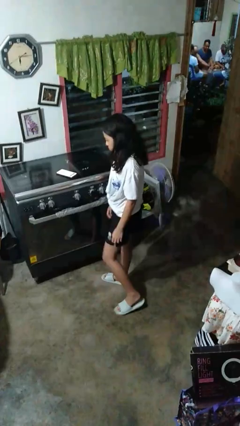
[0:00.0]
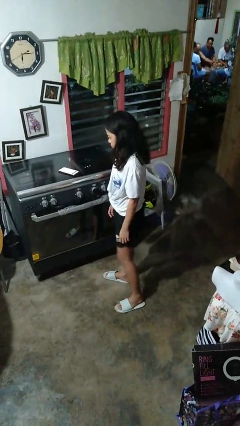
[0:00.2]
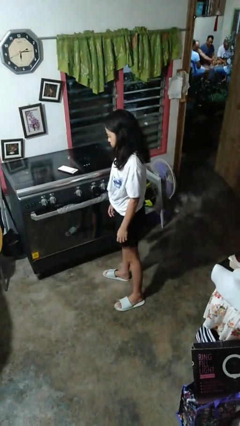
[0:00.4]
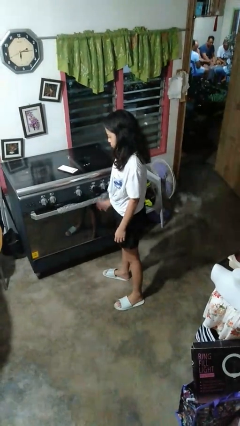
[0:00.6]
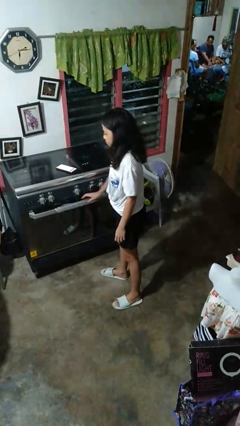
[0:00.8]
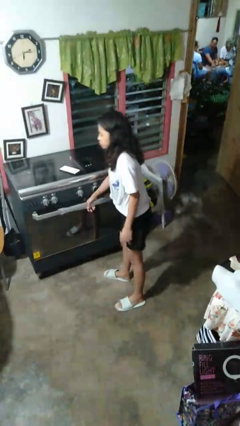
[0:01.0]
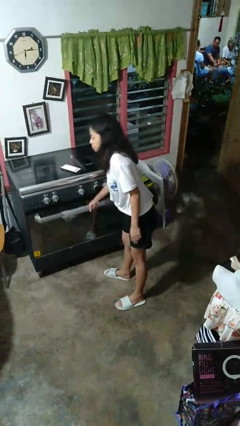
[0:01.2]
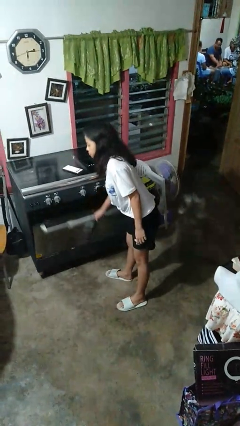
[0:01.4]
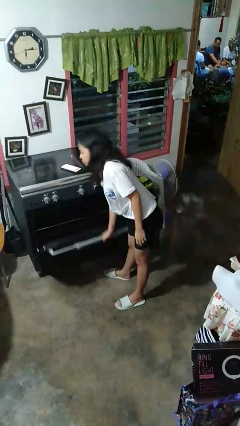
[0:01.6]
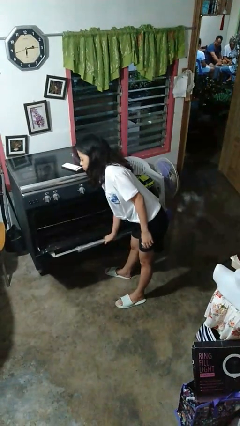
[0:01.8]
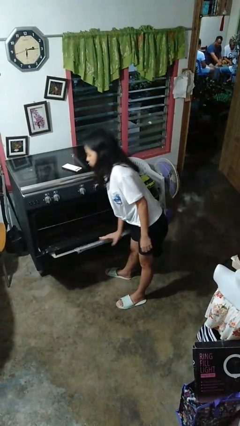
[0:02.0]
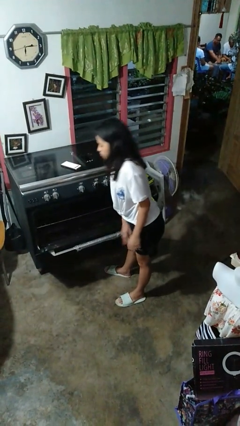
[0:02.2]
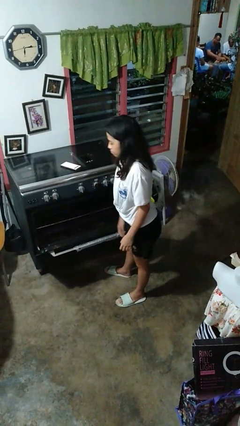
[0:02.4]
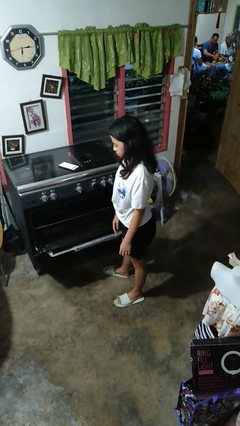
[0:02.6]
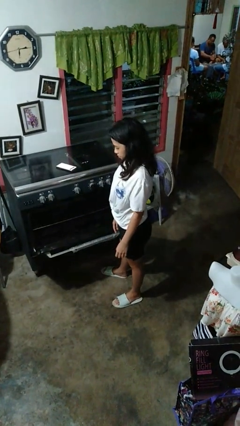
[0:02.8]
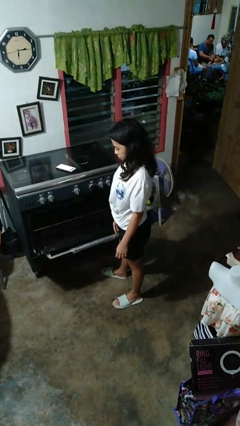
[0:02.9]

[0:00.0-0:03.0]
person opens oven door

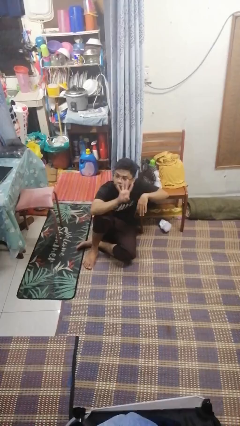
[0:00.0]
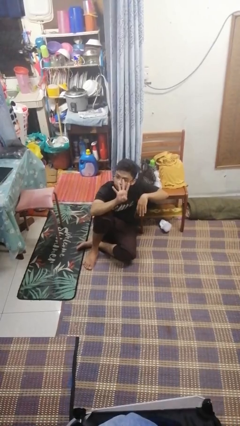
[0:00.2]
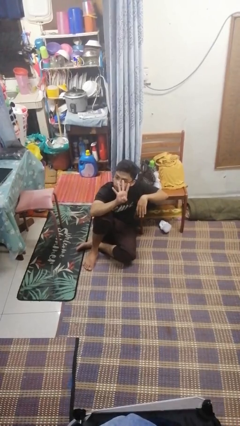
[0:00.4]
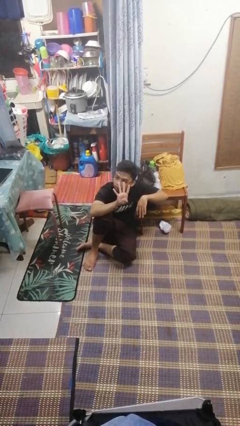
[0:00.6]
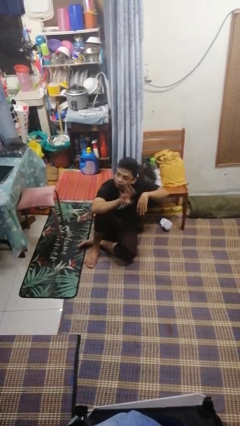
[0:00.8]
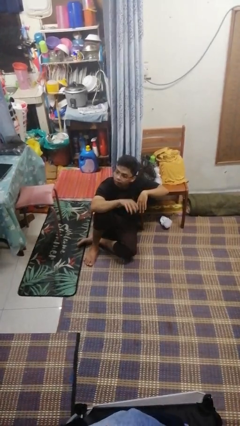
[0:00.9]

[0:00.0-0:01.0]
person gestures number four

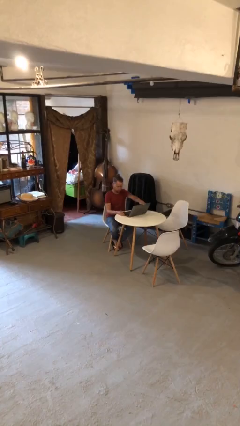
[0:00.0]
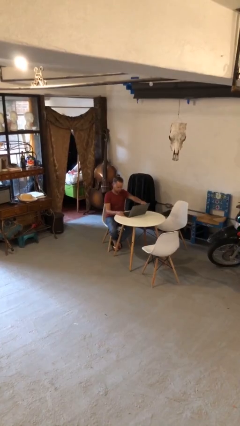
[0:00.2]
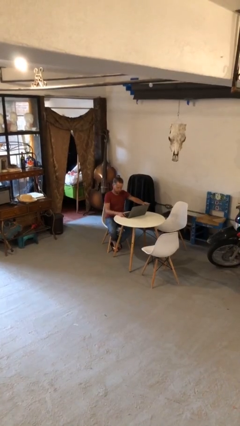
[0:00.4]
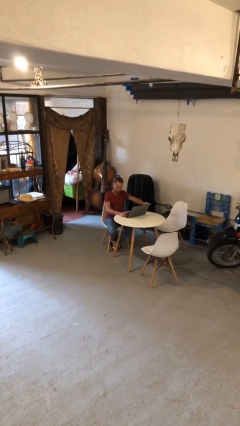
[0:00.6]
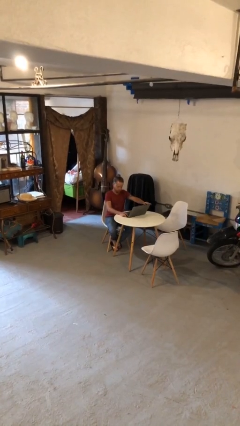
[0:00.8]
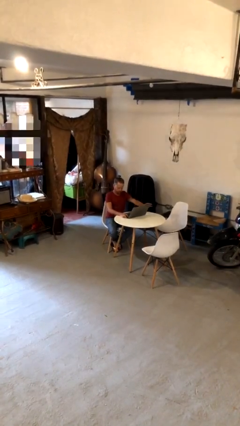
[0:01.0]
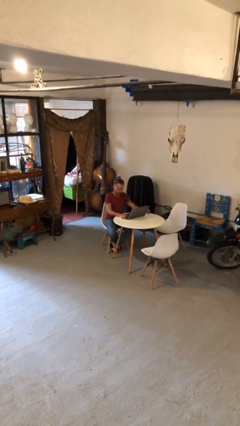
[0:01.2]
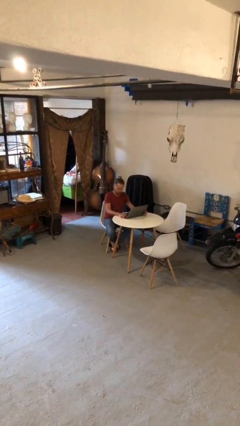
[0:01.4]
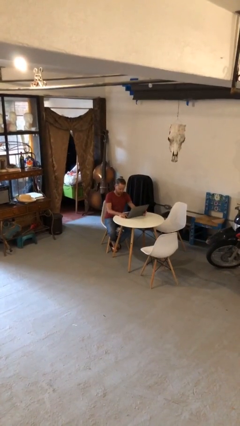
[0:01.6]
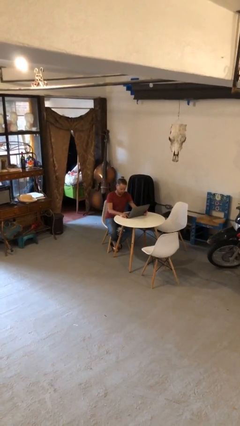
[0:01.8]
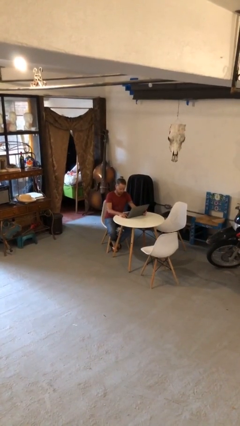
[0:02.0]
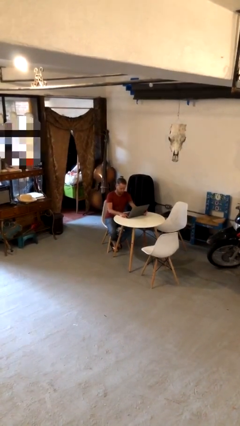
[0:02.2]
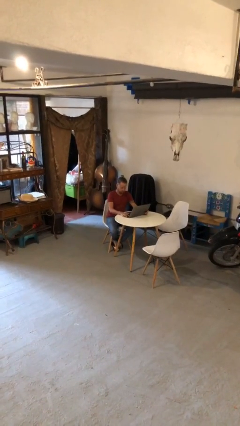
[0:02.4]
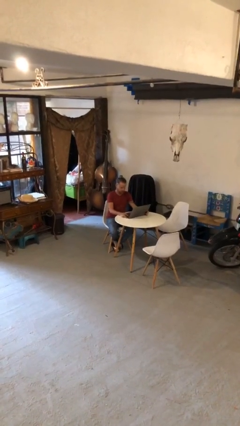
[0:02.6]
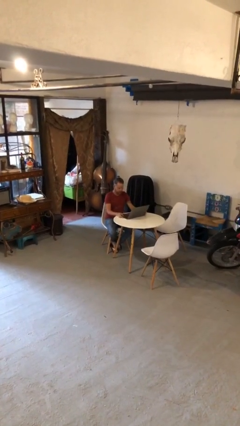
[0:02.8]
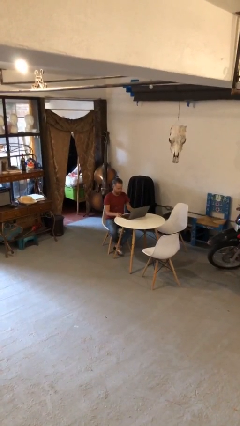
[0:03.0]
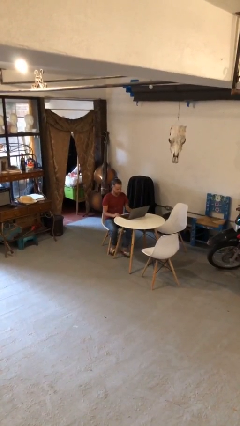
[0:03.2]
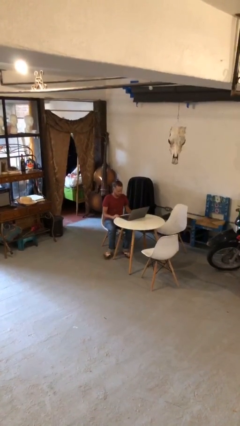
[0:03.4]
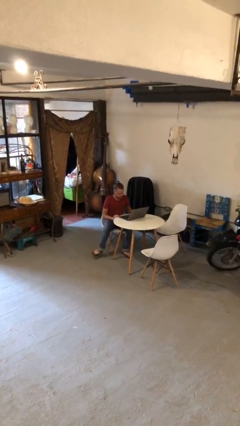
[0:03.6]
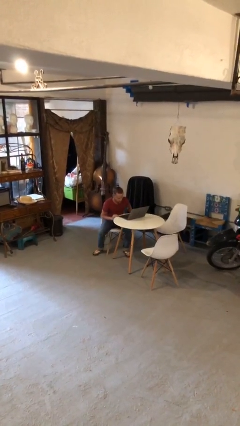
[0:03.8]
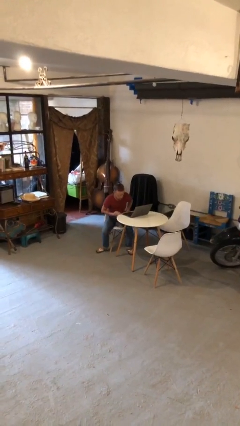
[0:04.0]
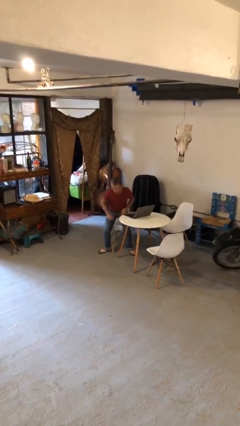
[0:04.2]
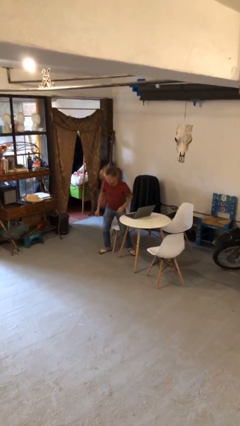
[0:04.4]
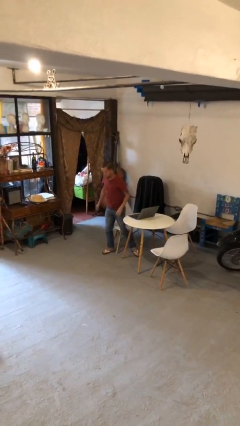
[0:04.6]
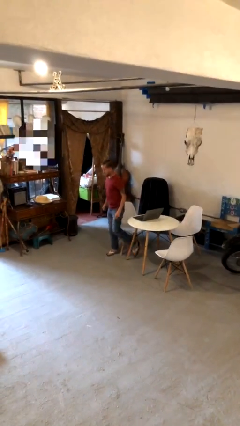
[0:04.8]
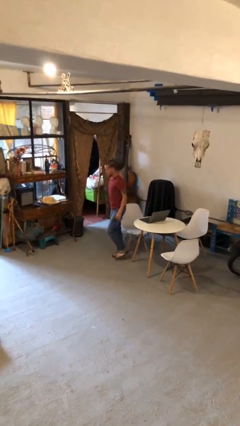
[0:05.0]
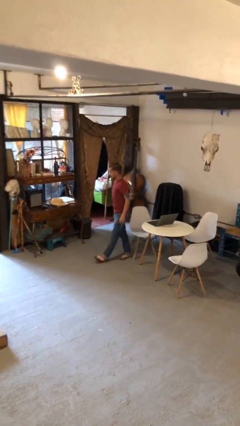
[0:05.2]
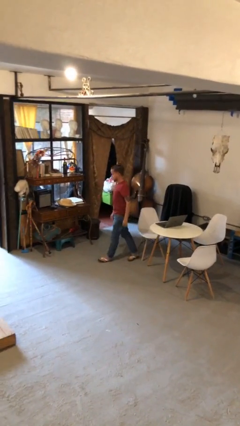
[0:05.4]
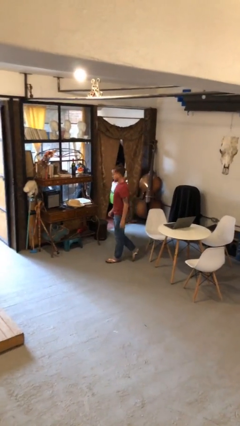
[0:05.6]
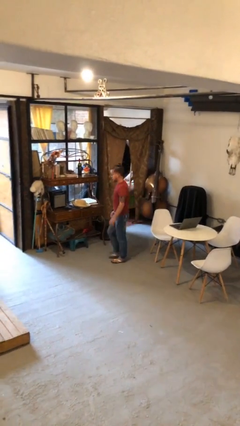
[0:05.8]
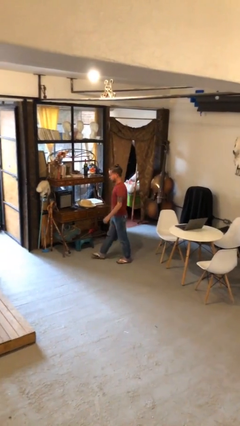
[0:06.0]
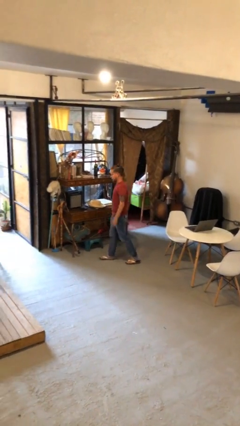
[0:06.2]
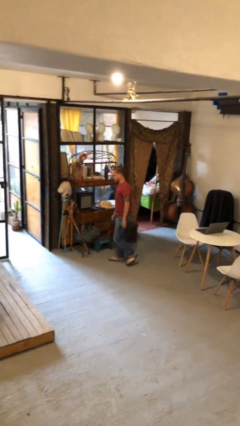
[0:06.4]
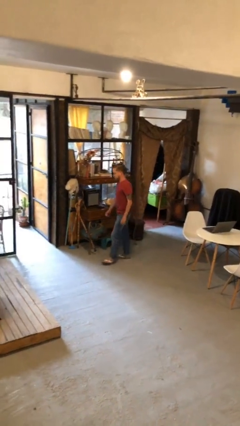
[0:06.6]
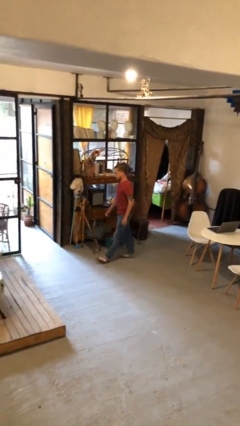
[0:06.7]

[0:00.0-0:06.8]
person stands up

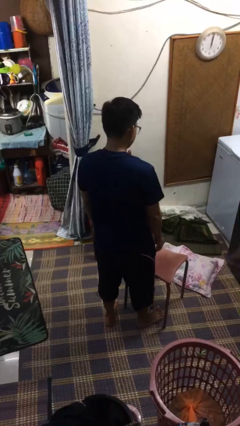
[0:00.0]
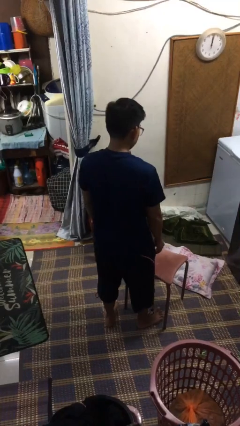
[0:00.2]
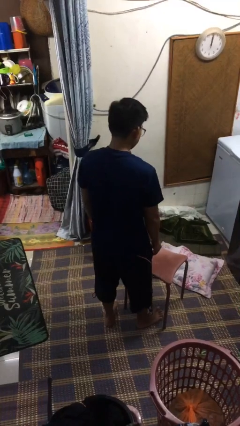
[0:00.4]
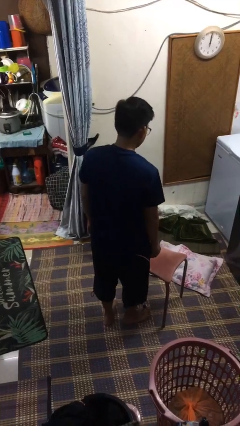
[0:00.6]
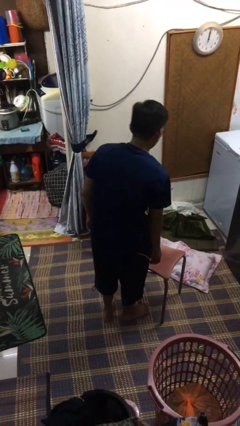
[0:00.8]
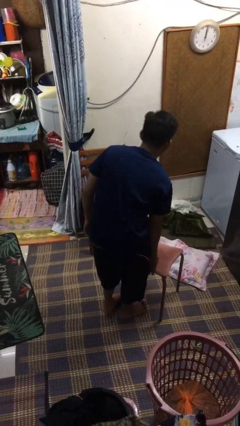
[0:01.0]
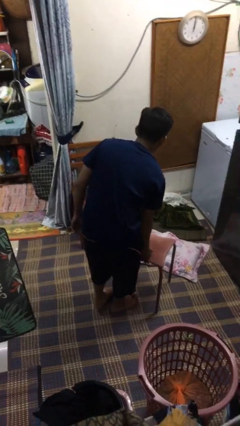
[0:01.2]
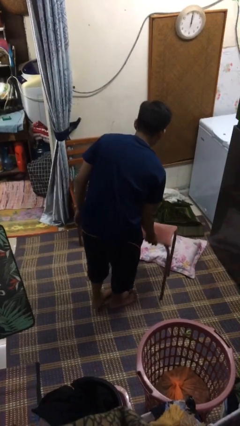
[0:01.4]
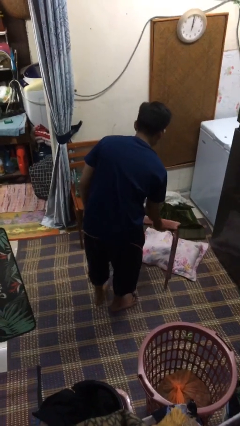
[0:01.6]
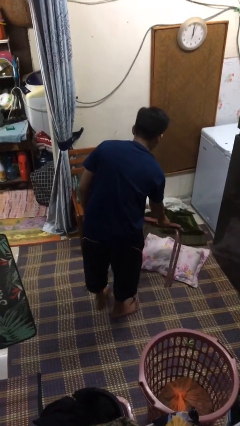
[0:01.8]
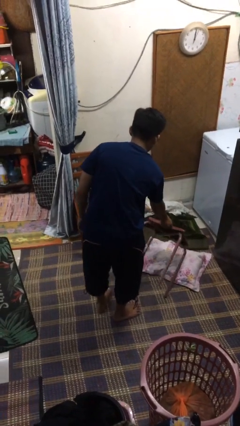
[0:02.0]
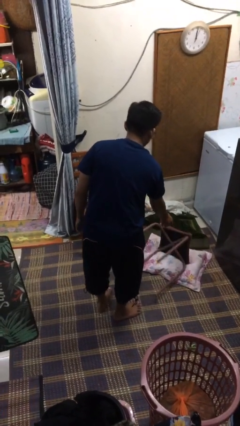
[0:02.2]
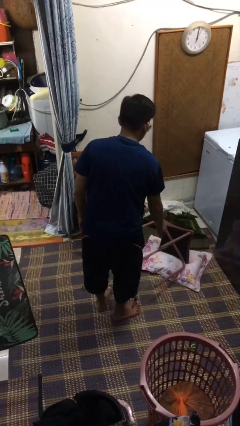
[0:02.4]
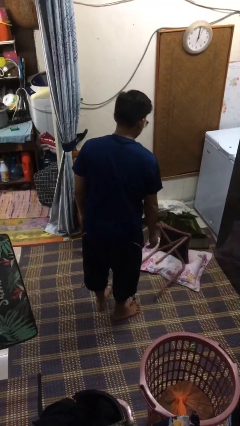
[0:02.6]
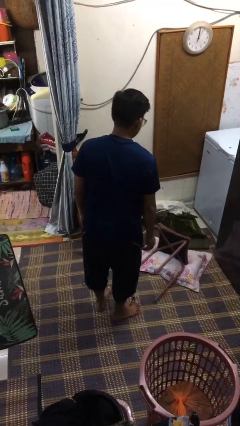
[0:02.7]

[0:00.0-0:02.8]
person knocks over furniture

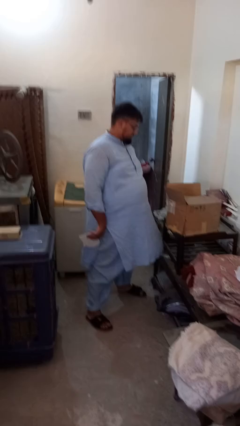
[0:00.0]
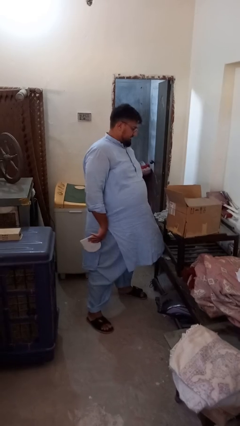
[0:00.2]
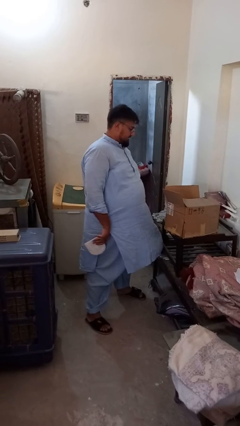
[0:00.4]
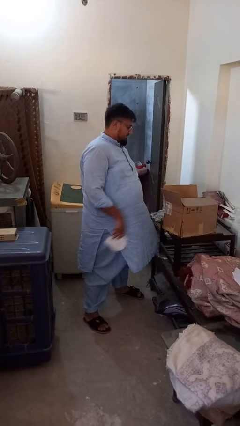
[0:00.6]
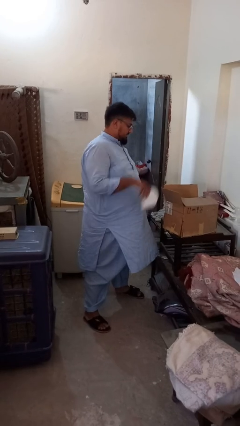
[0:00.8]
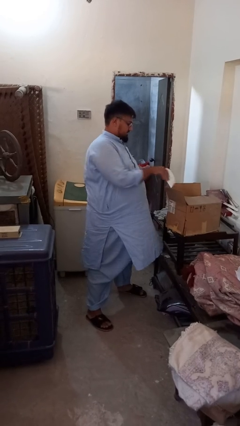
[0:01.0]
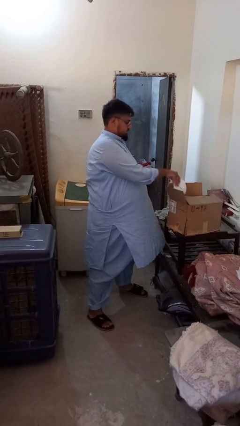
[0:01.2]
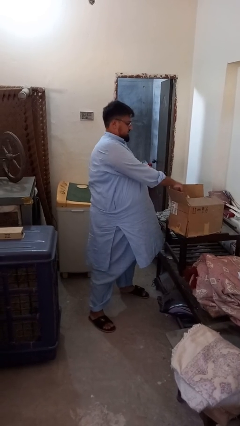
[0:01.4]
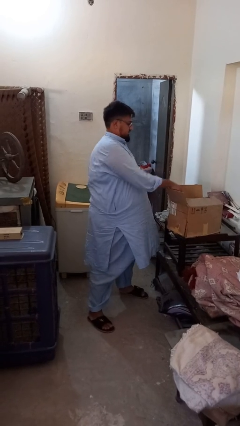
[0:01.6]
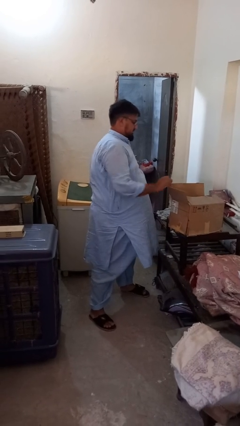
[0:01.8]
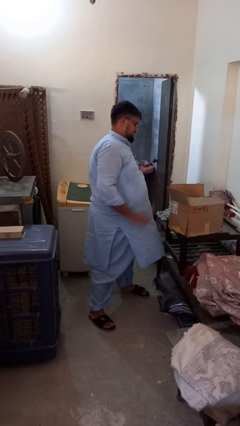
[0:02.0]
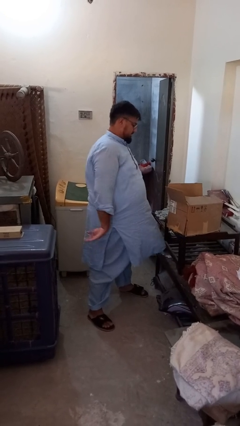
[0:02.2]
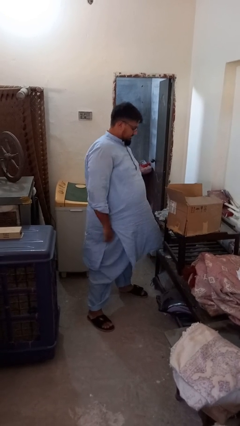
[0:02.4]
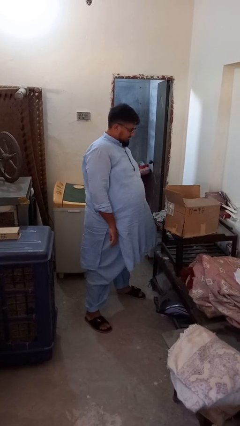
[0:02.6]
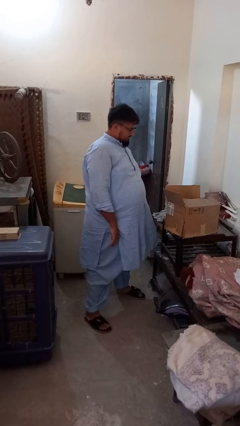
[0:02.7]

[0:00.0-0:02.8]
person puts object into box

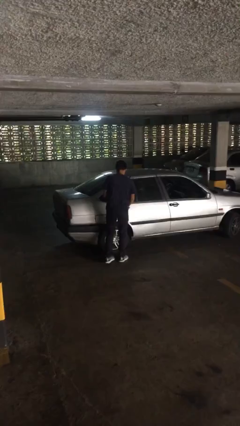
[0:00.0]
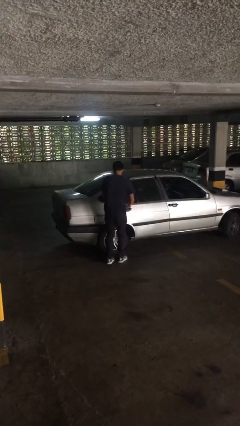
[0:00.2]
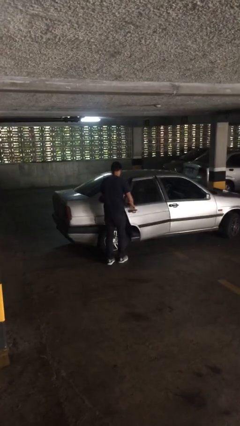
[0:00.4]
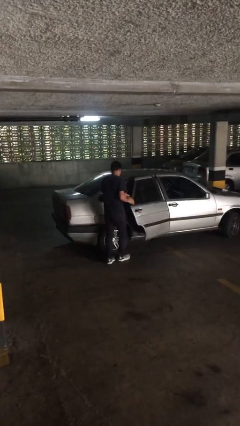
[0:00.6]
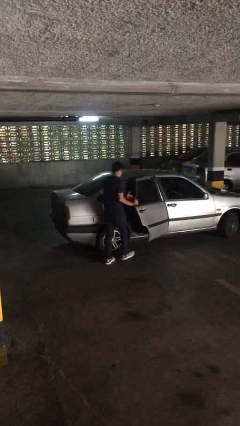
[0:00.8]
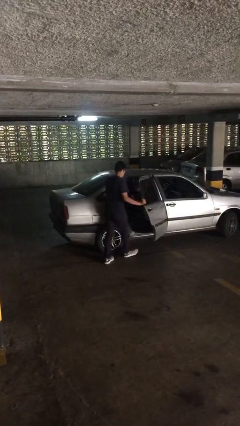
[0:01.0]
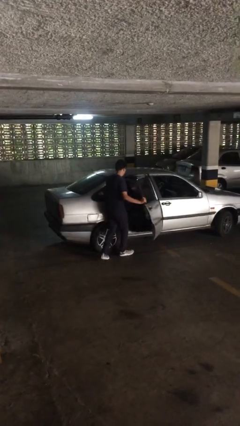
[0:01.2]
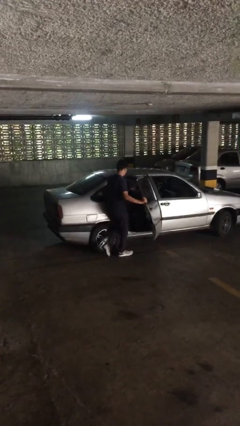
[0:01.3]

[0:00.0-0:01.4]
person opens car door
